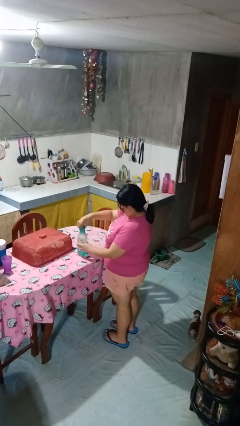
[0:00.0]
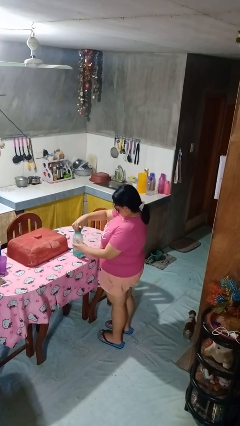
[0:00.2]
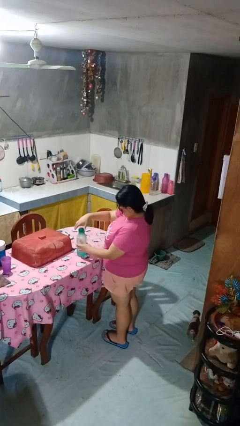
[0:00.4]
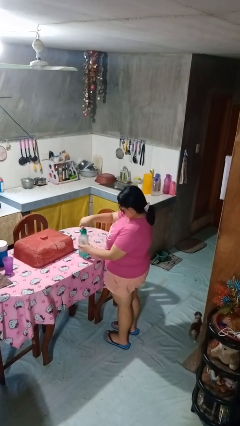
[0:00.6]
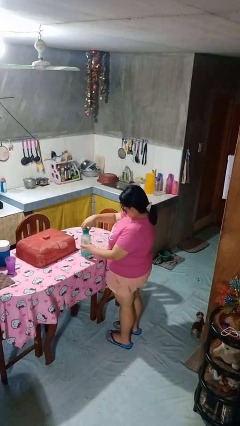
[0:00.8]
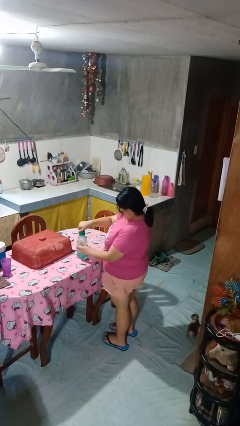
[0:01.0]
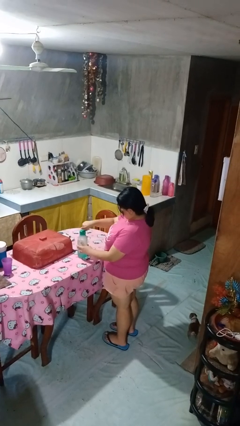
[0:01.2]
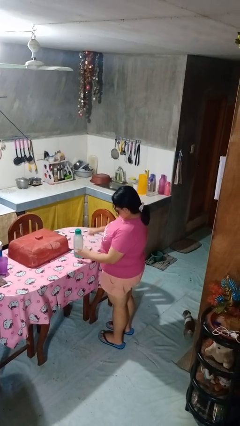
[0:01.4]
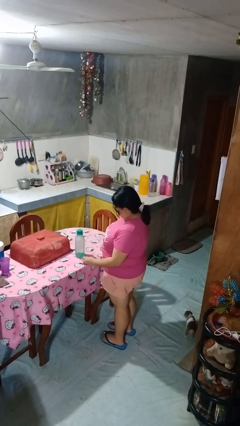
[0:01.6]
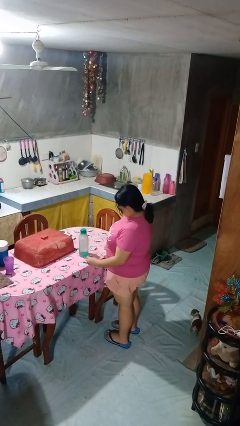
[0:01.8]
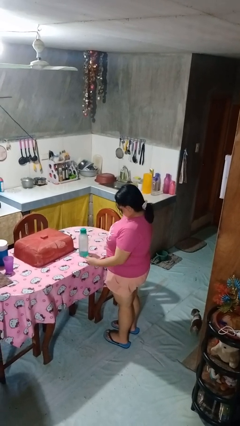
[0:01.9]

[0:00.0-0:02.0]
person screws lid to bottle

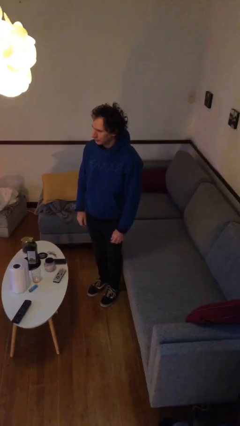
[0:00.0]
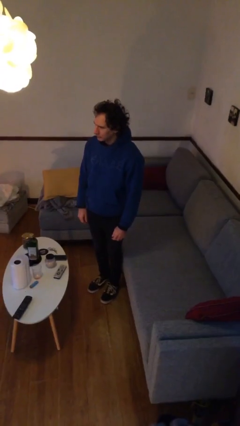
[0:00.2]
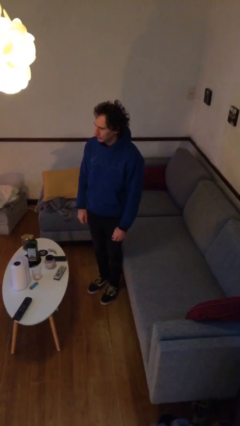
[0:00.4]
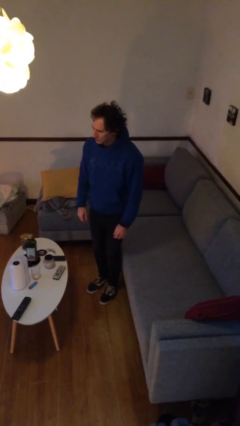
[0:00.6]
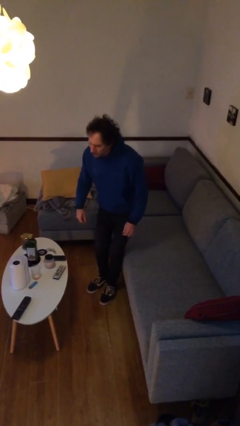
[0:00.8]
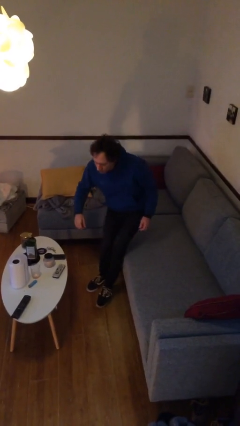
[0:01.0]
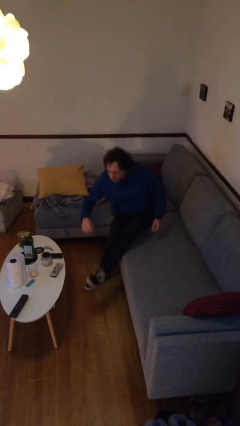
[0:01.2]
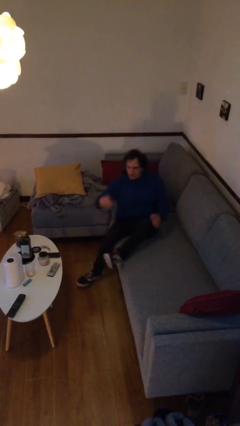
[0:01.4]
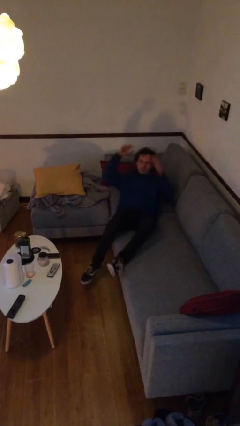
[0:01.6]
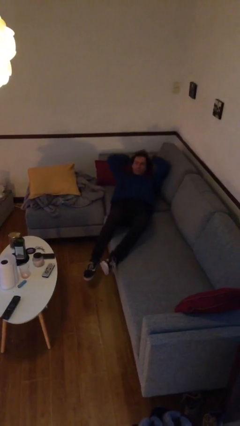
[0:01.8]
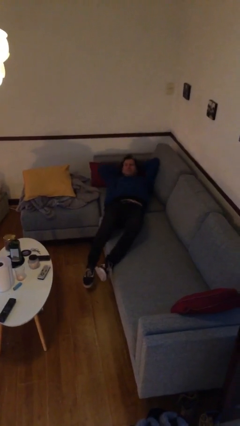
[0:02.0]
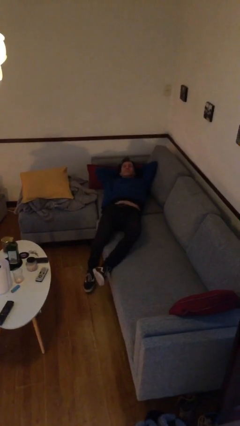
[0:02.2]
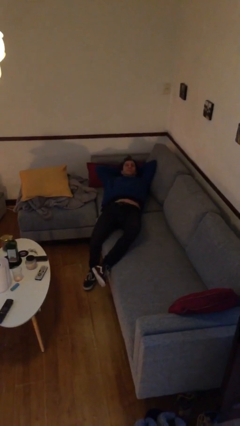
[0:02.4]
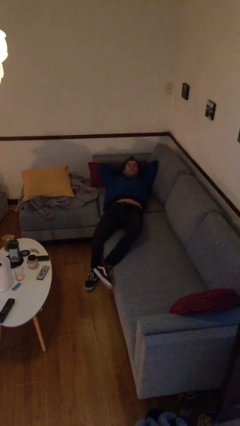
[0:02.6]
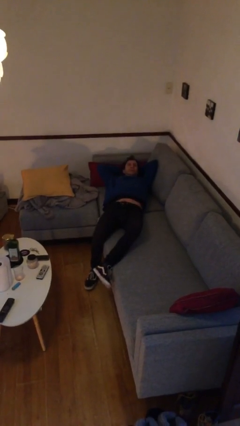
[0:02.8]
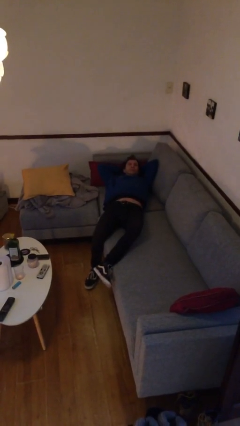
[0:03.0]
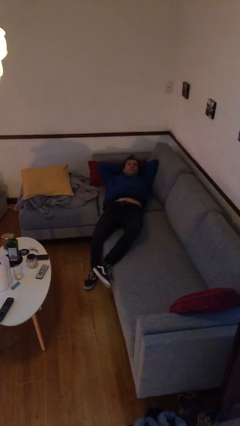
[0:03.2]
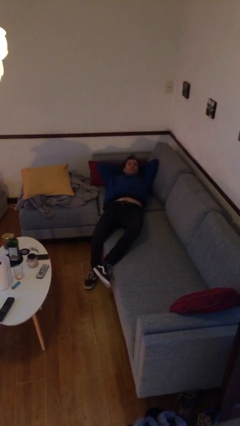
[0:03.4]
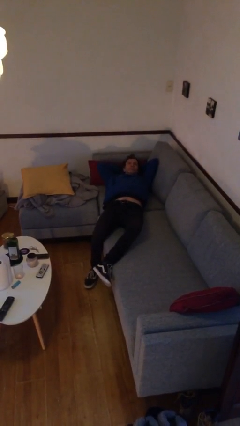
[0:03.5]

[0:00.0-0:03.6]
person lies down on couch

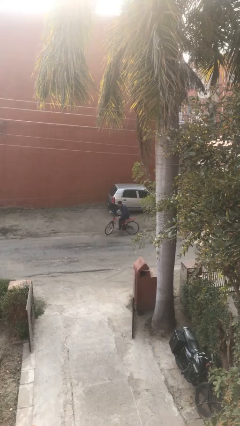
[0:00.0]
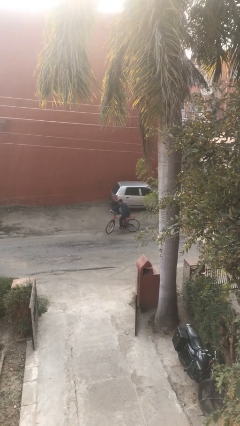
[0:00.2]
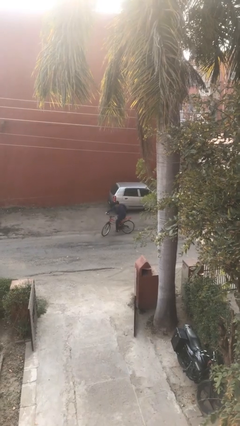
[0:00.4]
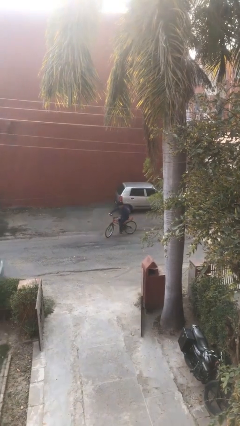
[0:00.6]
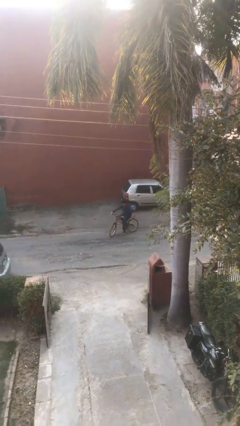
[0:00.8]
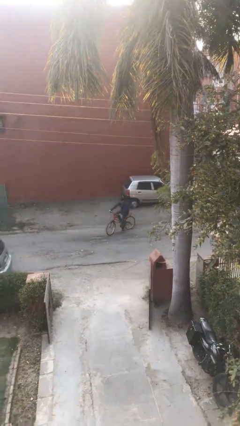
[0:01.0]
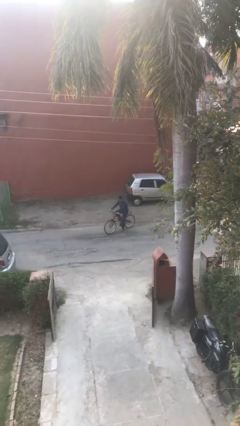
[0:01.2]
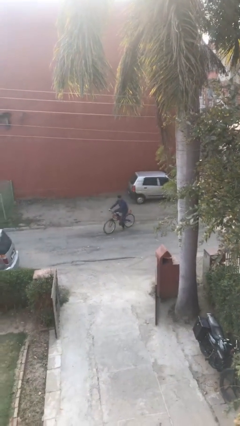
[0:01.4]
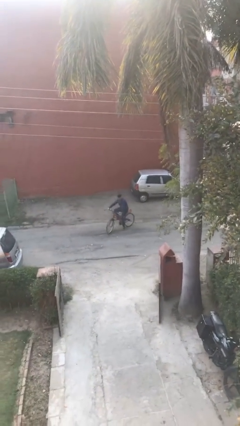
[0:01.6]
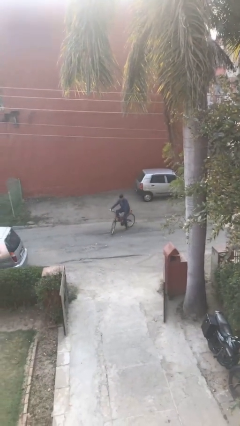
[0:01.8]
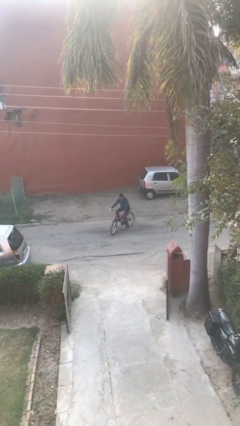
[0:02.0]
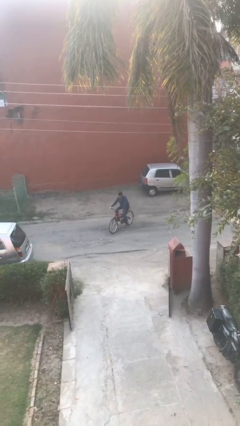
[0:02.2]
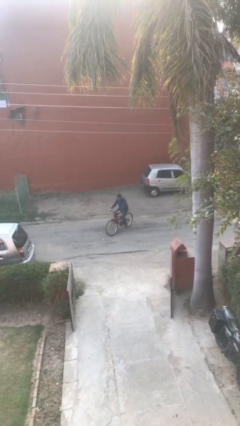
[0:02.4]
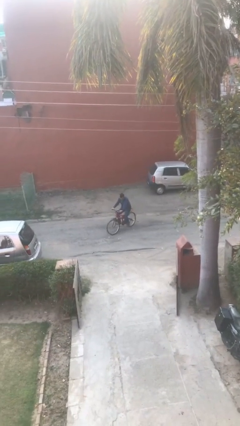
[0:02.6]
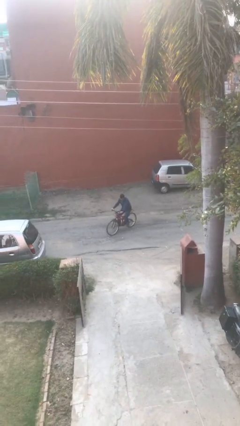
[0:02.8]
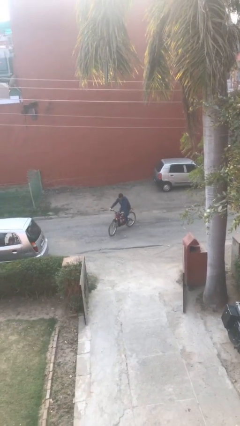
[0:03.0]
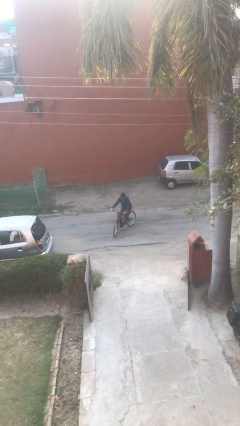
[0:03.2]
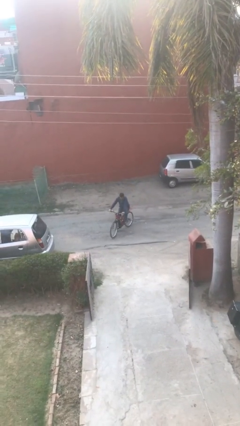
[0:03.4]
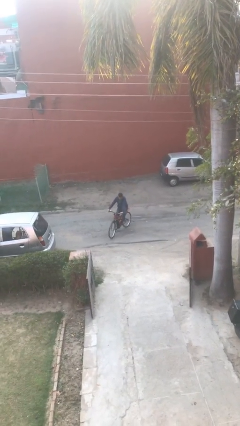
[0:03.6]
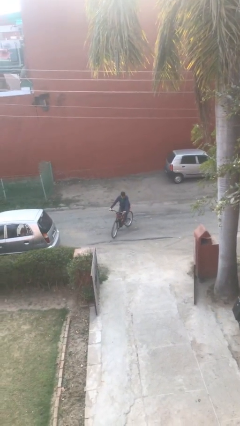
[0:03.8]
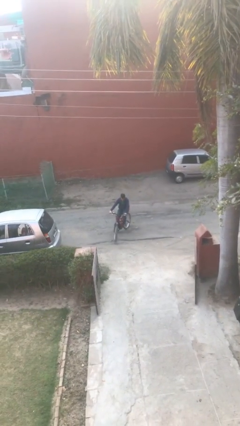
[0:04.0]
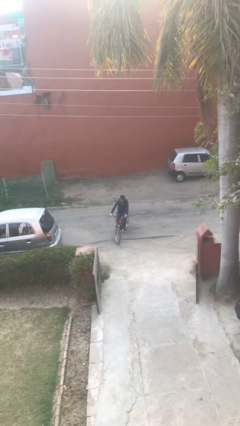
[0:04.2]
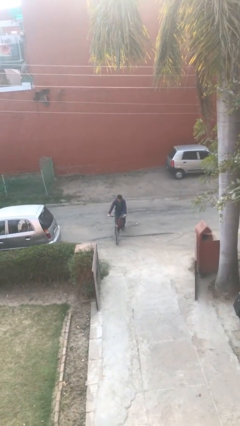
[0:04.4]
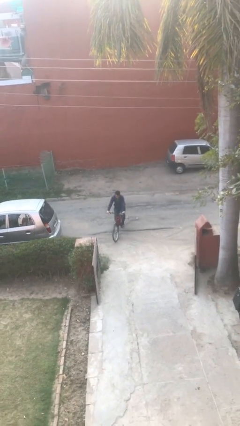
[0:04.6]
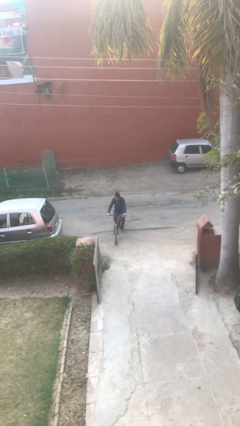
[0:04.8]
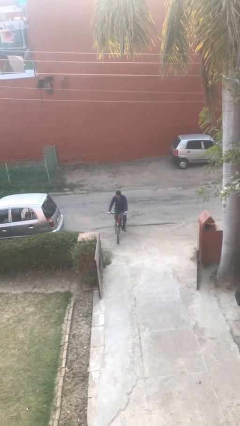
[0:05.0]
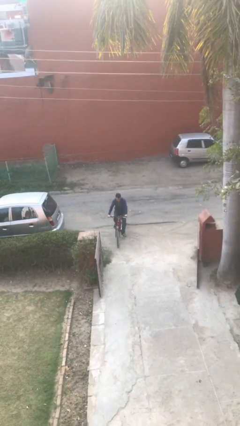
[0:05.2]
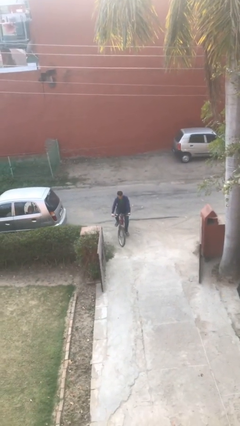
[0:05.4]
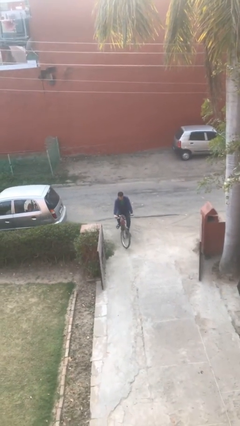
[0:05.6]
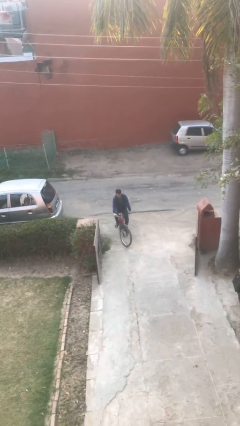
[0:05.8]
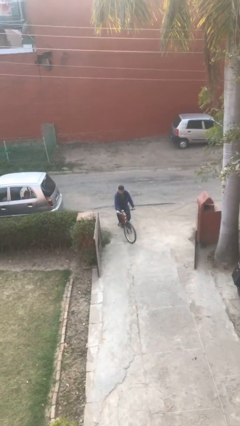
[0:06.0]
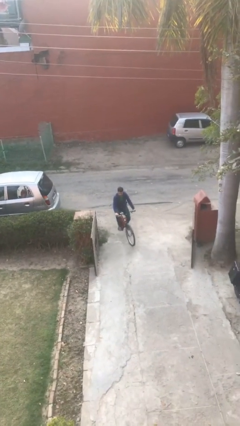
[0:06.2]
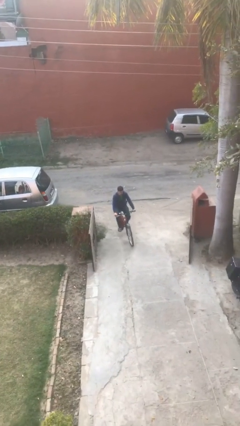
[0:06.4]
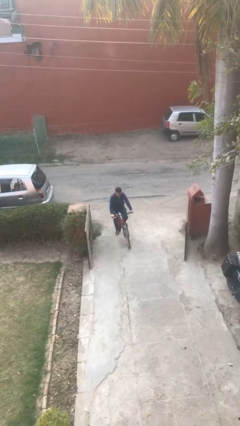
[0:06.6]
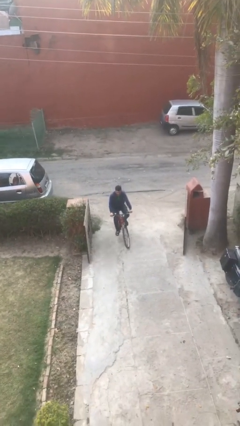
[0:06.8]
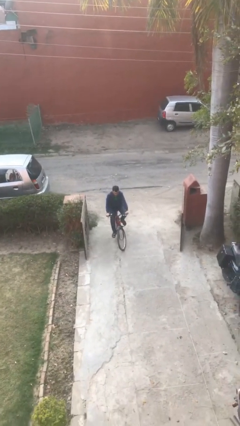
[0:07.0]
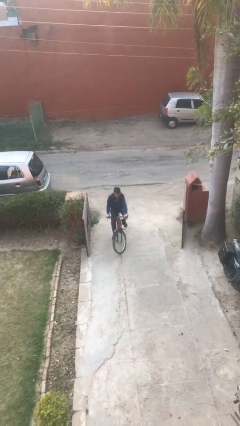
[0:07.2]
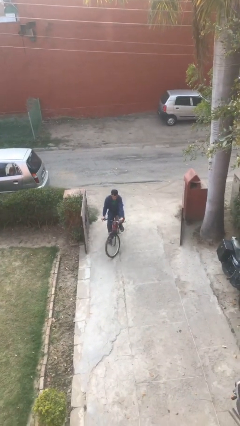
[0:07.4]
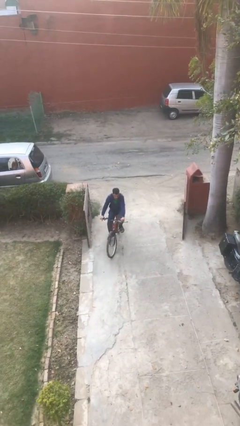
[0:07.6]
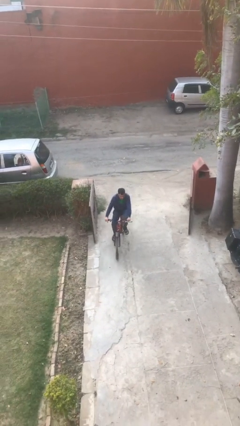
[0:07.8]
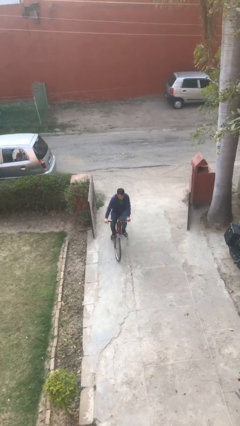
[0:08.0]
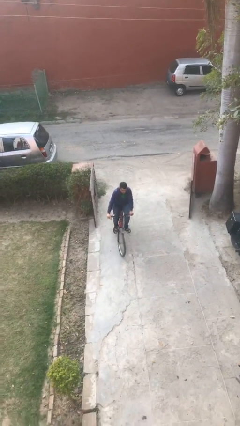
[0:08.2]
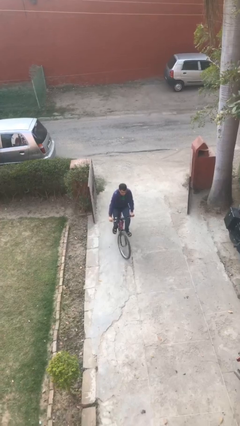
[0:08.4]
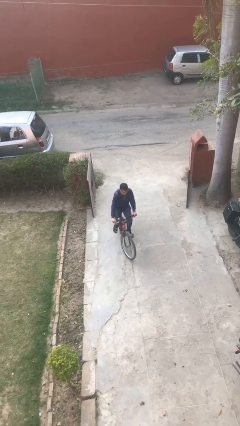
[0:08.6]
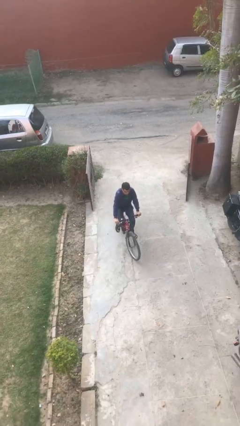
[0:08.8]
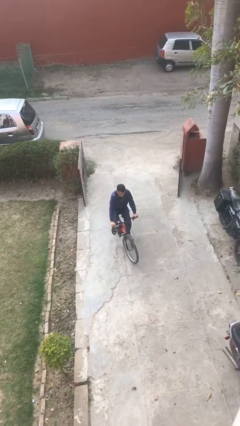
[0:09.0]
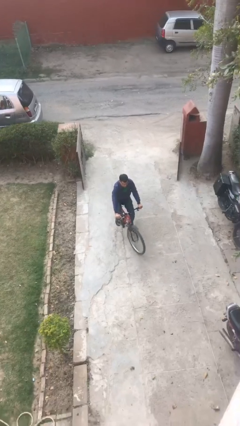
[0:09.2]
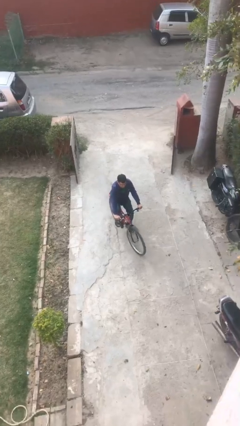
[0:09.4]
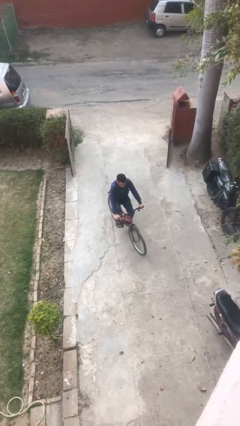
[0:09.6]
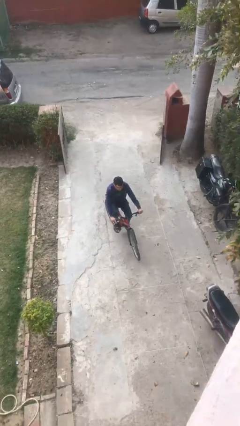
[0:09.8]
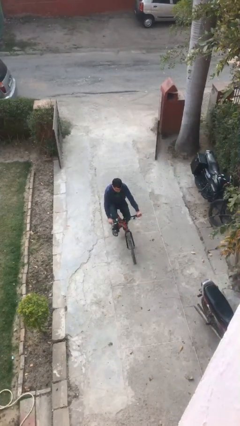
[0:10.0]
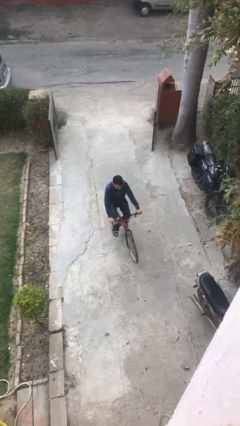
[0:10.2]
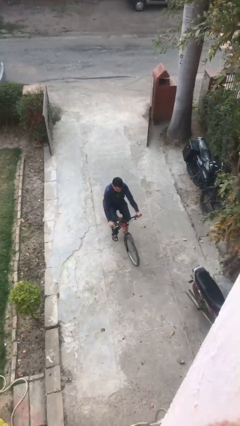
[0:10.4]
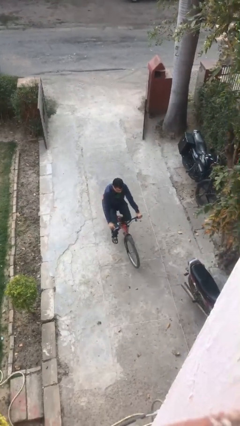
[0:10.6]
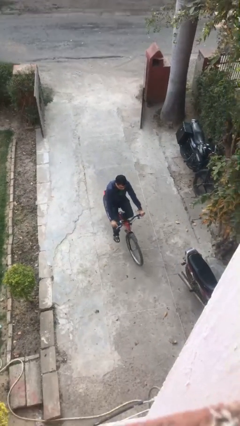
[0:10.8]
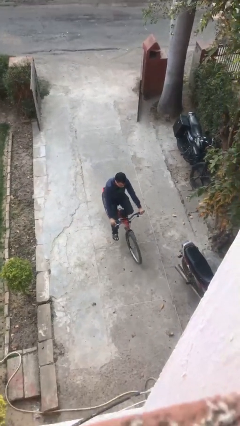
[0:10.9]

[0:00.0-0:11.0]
person rides bicycle

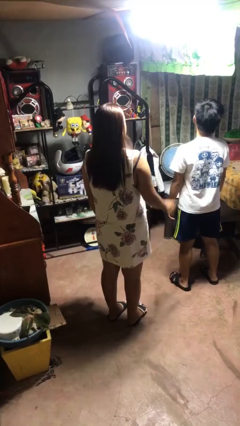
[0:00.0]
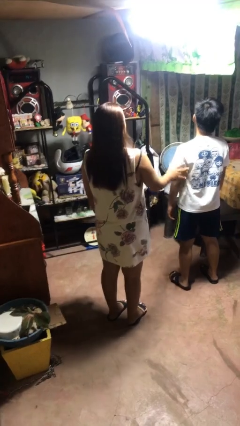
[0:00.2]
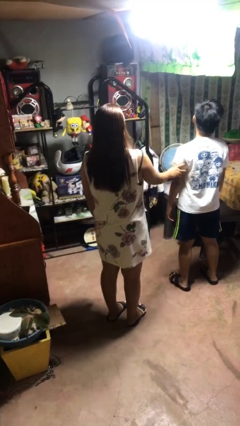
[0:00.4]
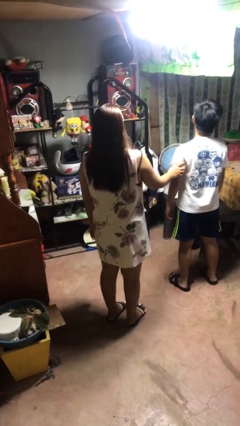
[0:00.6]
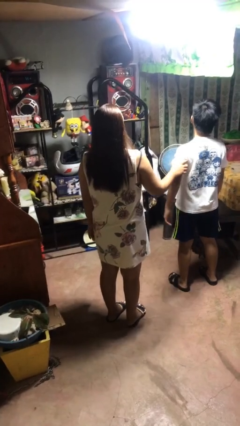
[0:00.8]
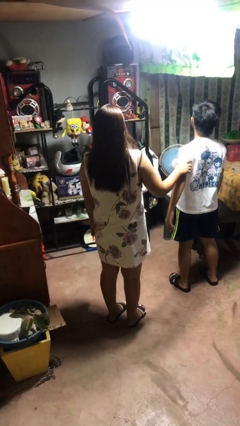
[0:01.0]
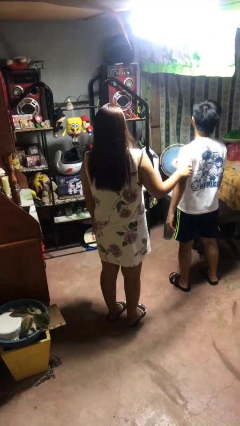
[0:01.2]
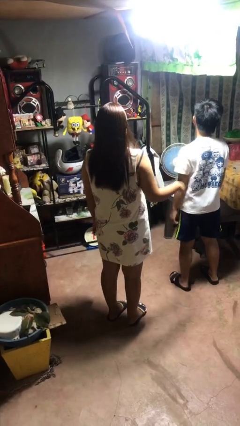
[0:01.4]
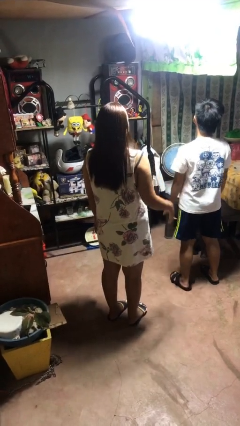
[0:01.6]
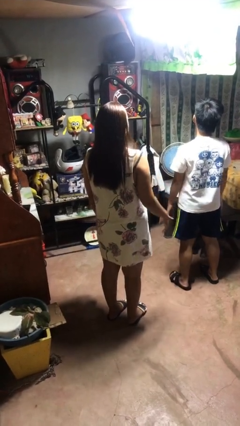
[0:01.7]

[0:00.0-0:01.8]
person grabs person by bicep
